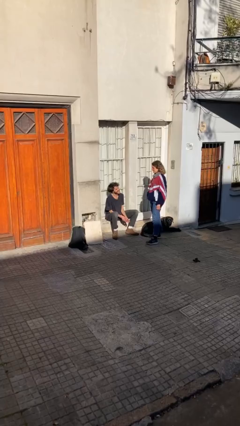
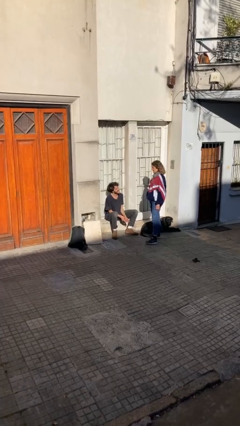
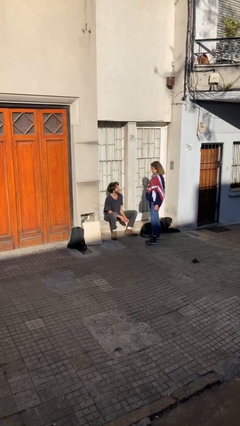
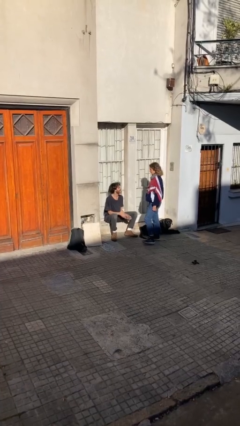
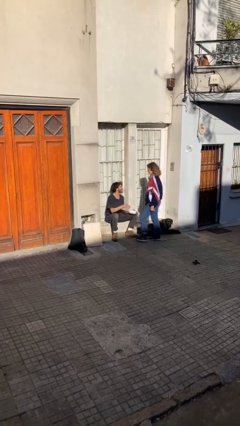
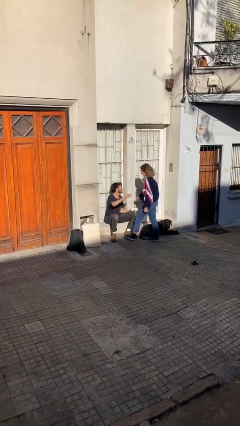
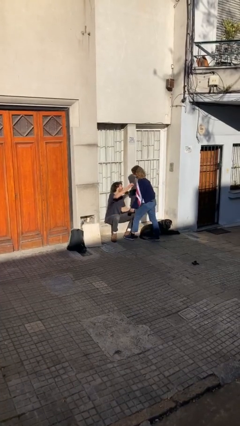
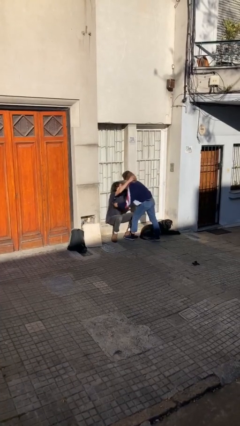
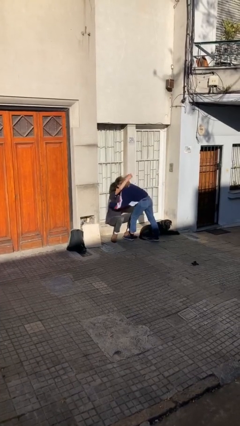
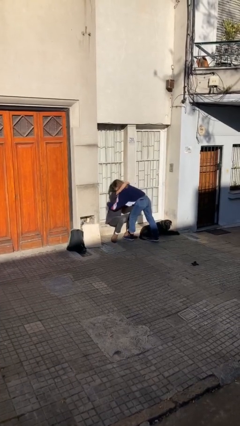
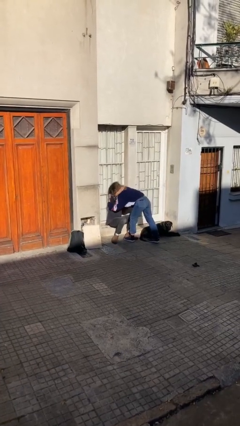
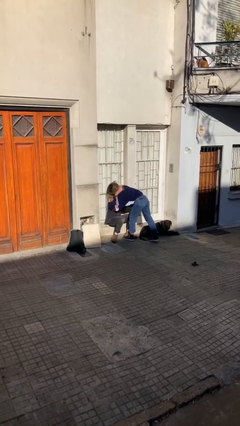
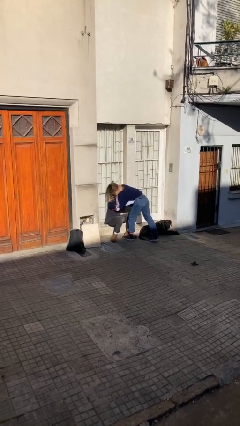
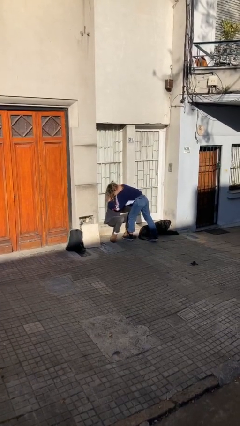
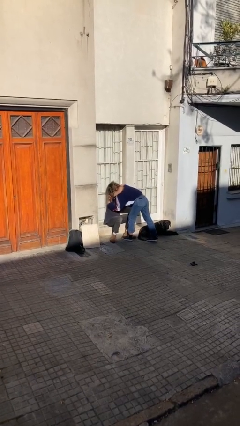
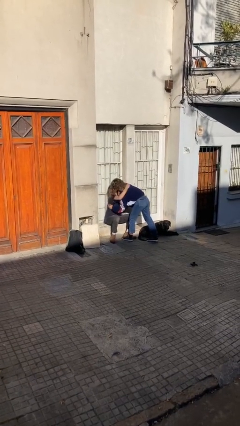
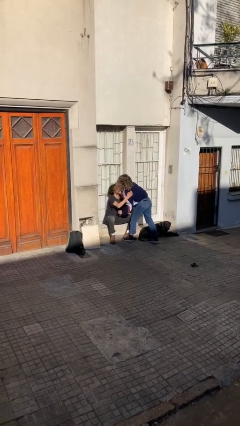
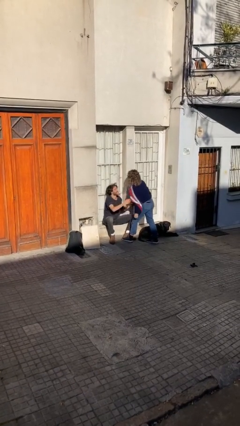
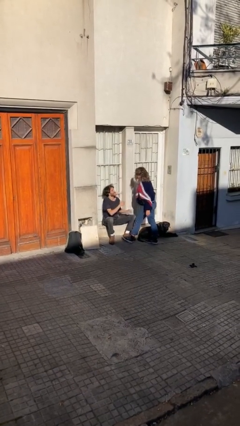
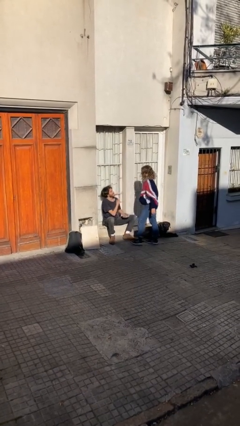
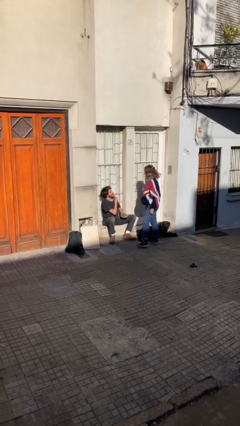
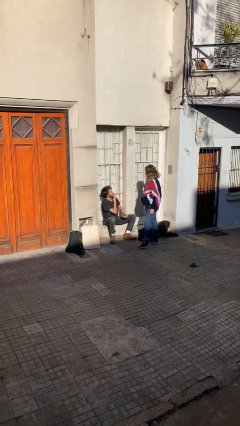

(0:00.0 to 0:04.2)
person embraces person

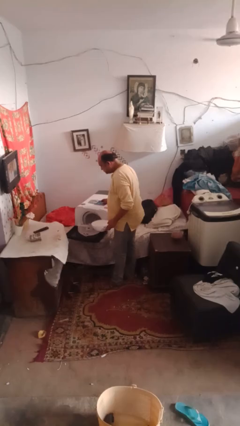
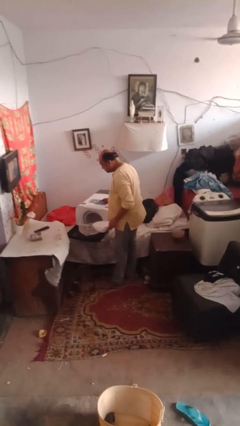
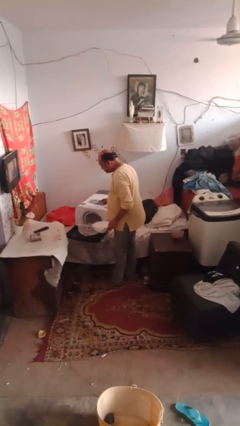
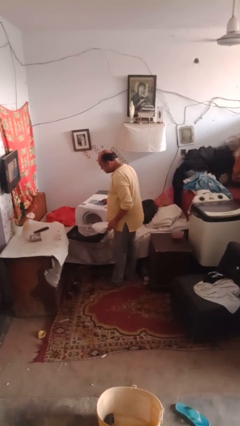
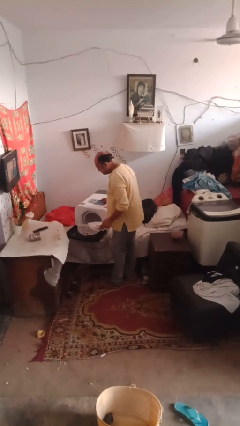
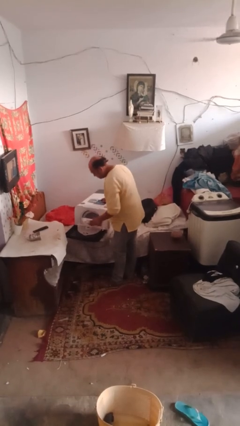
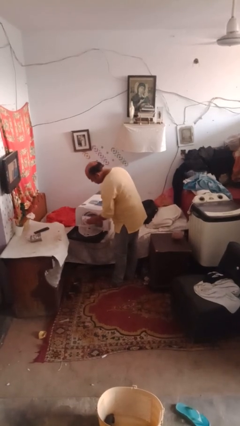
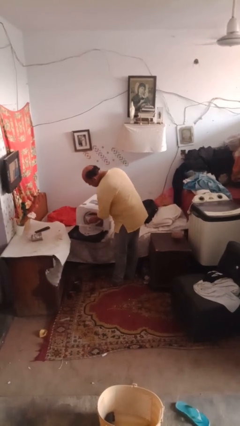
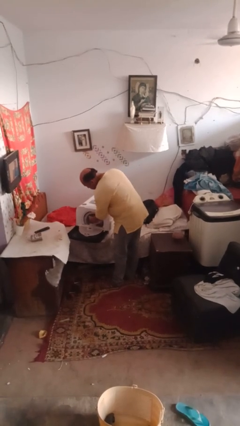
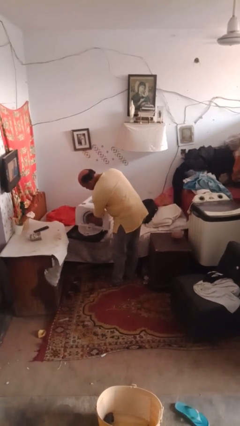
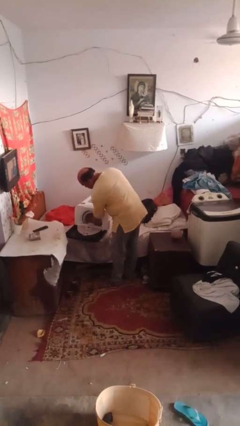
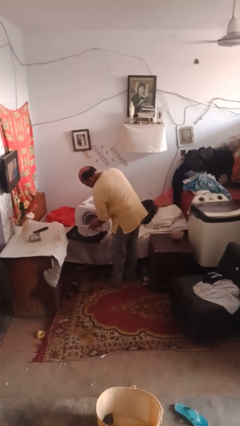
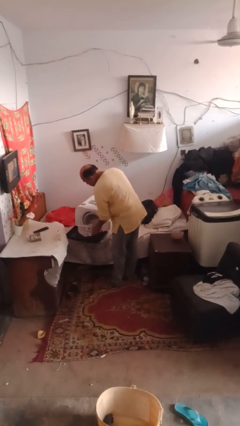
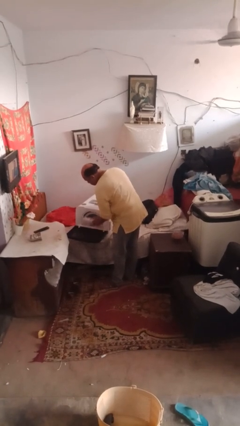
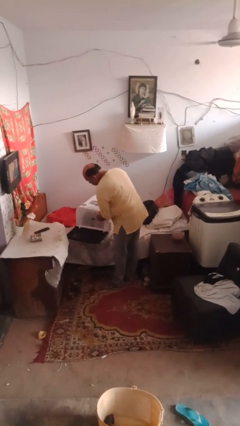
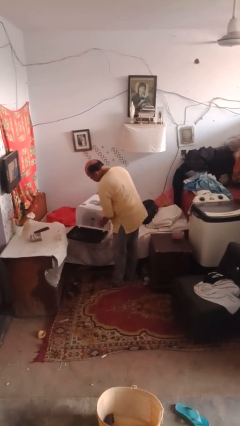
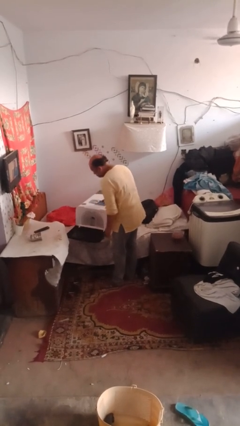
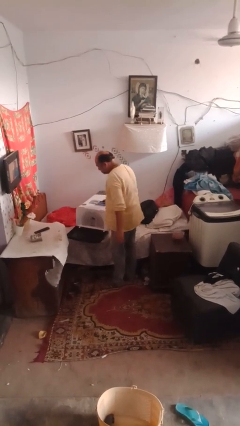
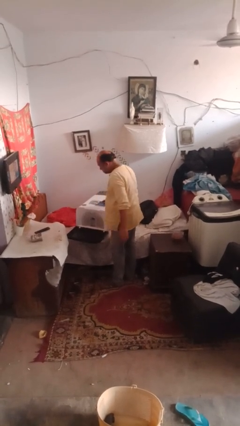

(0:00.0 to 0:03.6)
person loads dishwasher

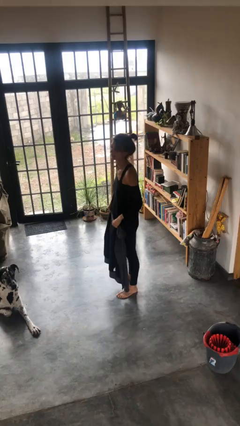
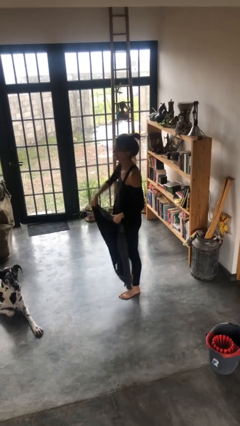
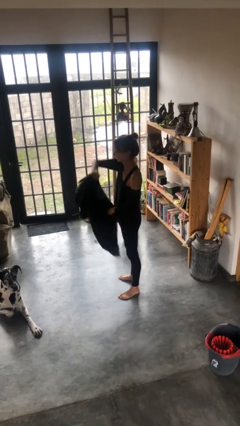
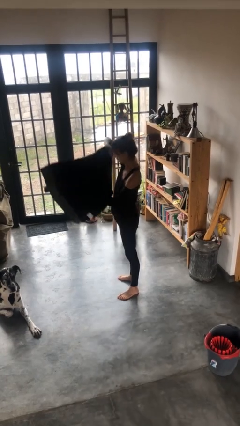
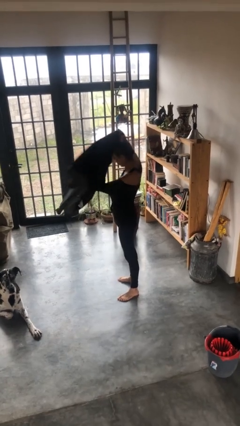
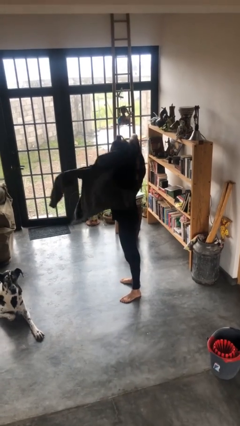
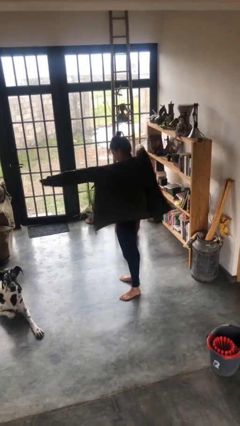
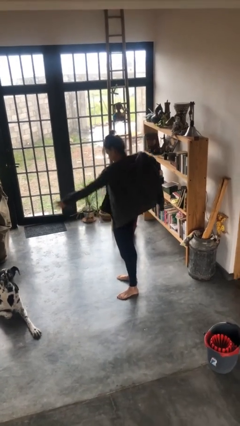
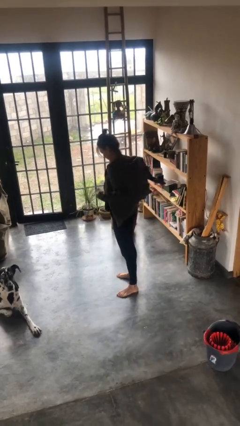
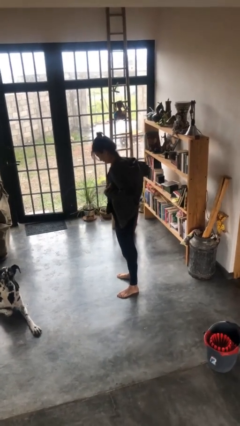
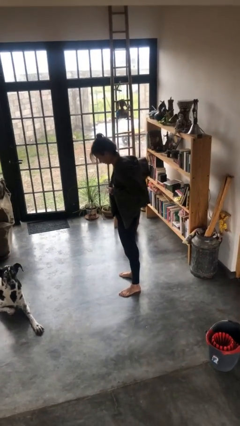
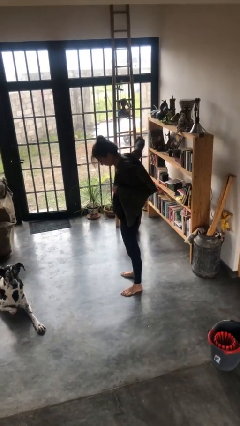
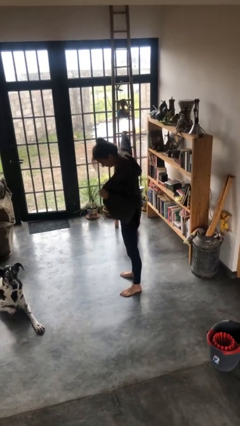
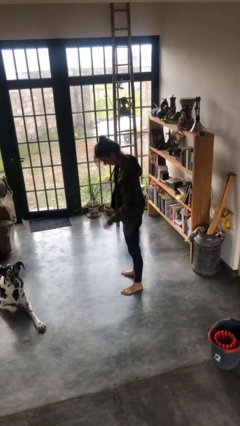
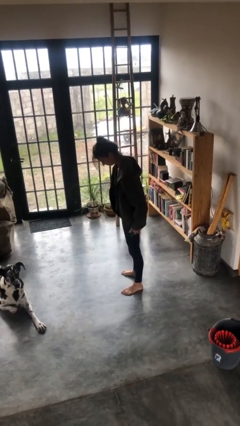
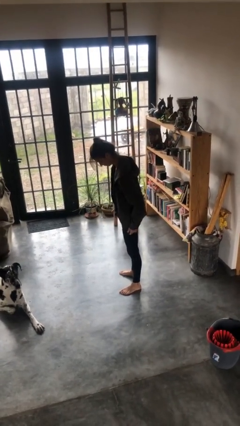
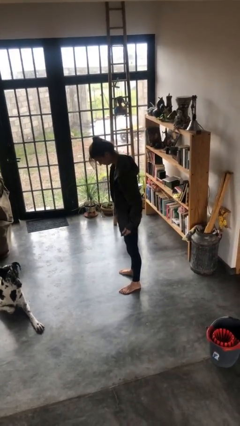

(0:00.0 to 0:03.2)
person puts on jacket

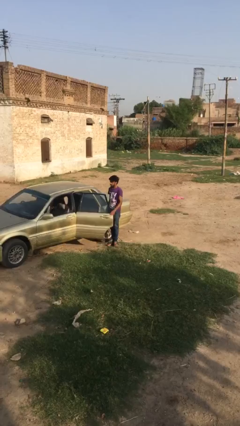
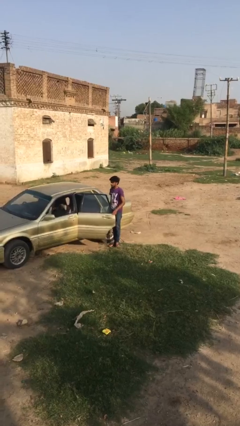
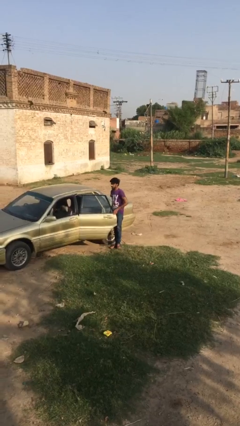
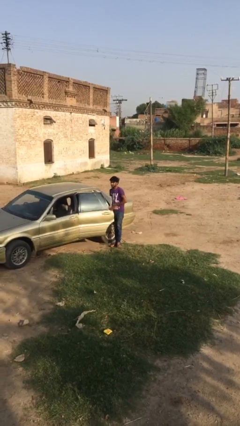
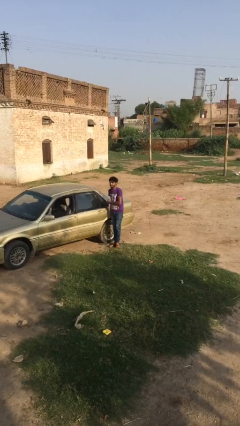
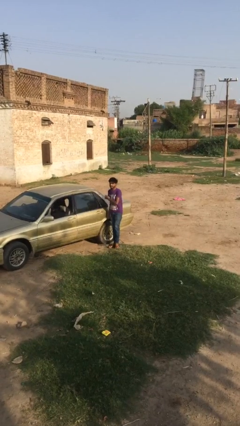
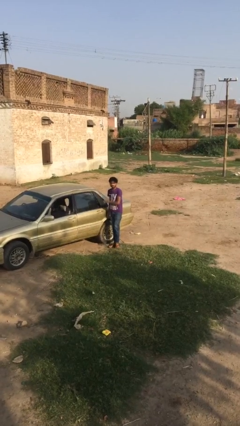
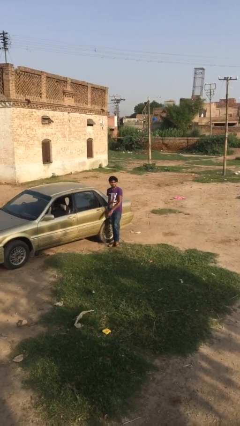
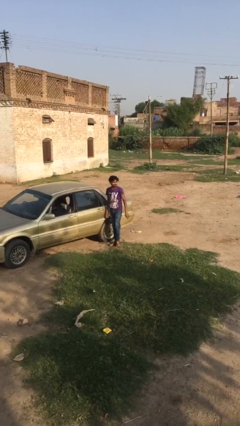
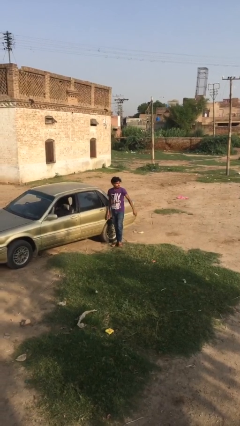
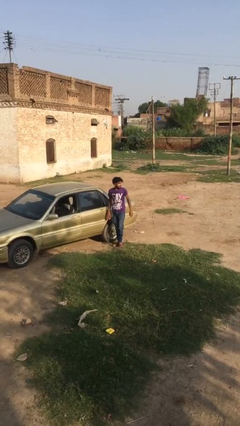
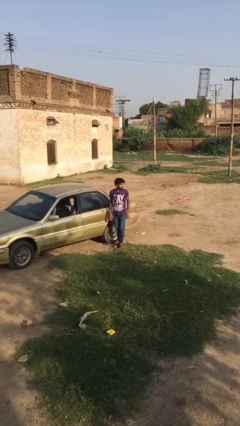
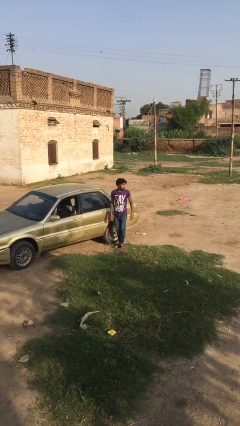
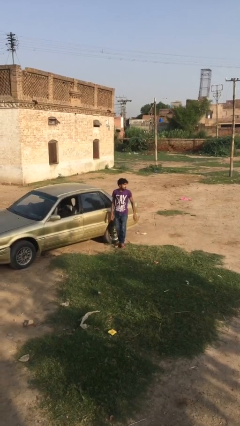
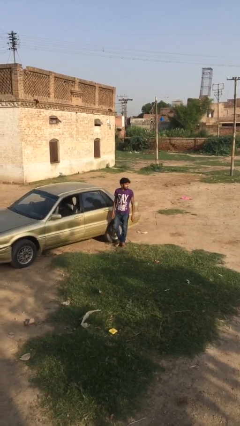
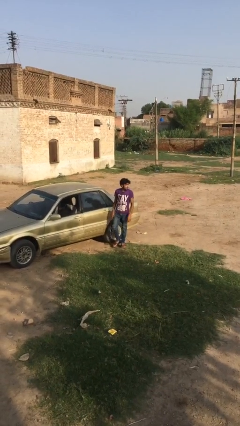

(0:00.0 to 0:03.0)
person closes car door

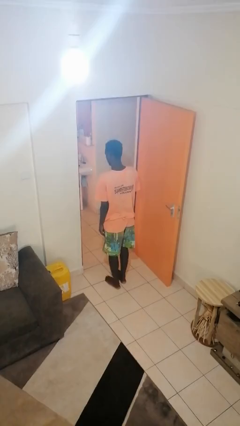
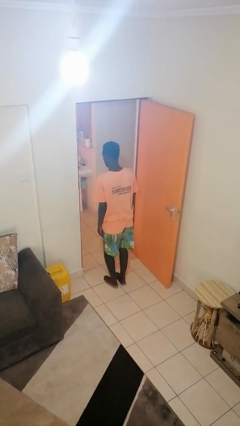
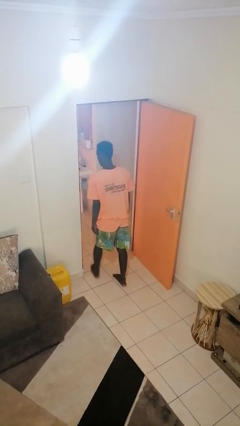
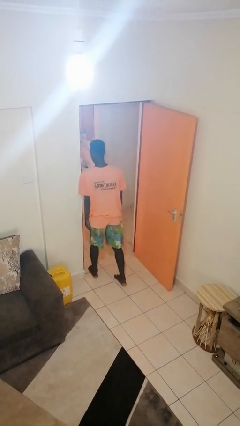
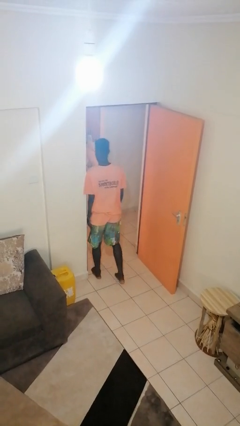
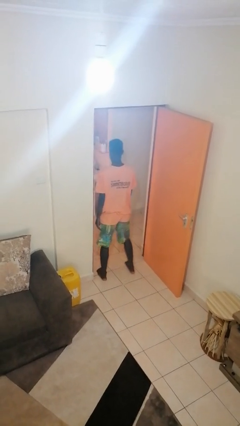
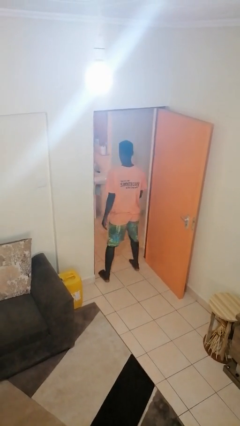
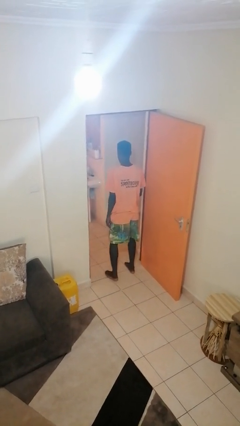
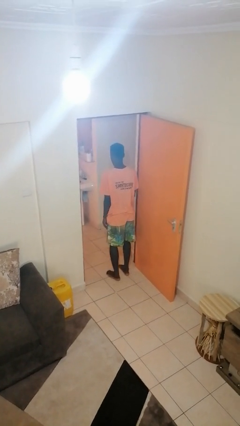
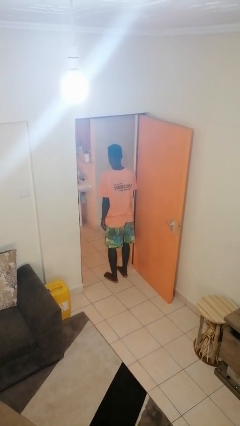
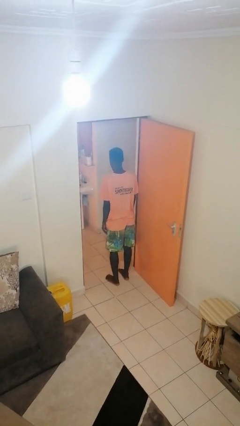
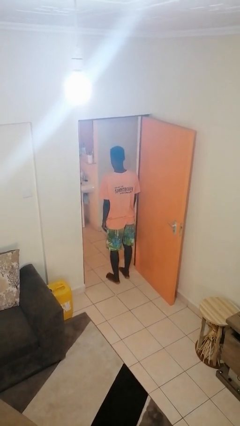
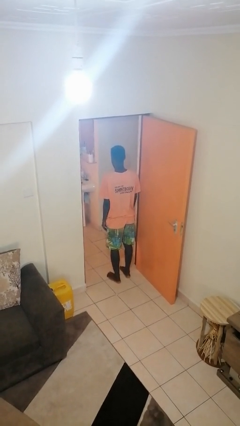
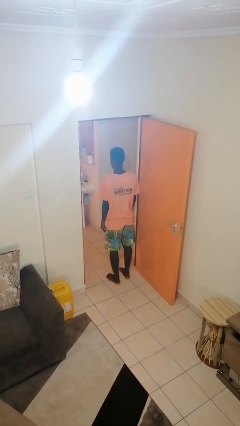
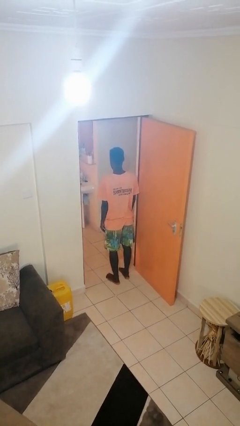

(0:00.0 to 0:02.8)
person bumps into wall

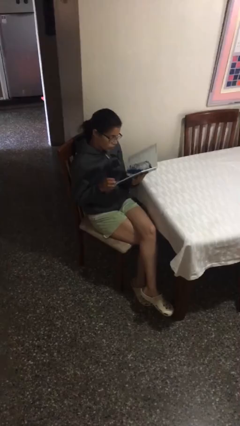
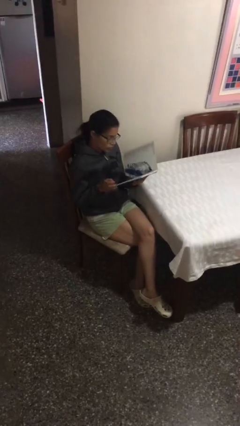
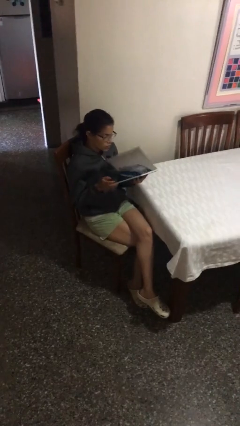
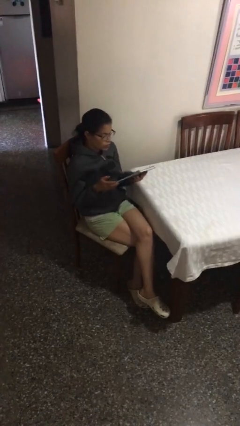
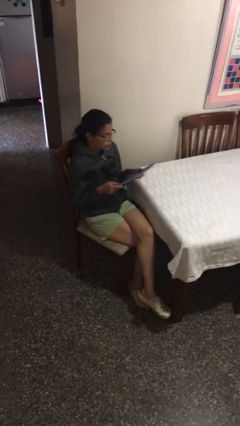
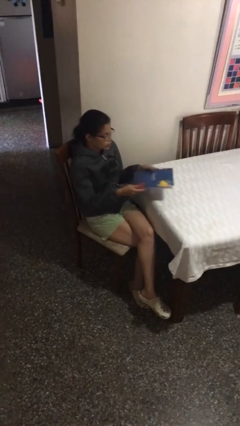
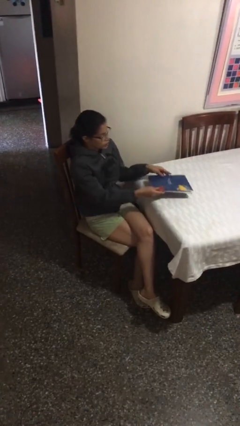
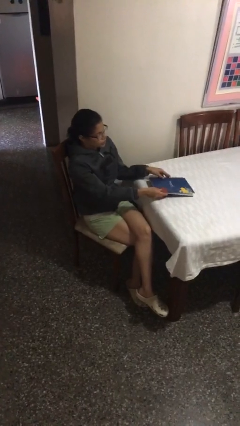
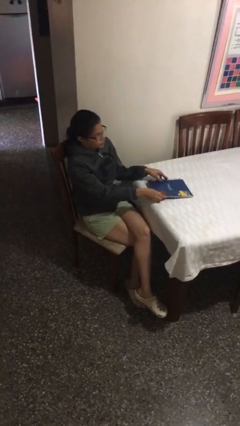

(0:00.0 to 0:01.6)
person puts down object on table
